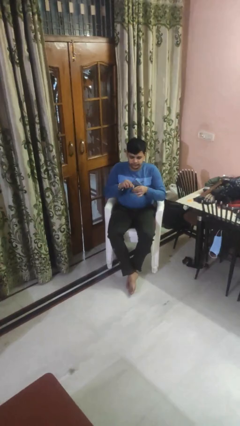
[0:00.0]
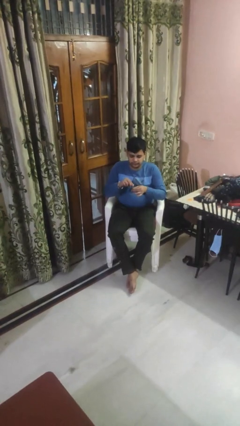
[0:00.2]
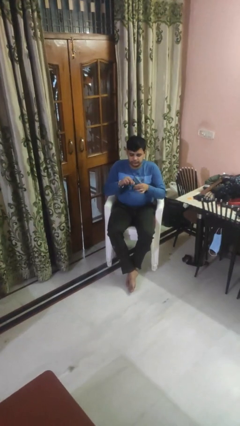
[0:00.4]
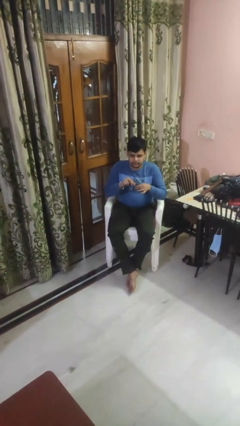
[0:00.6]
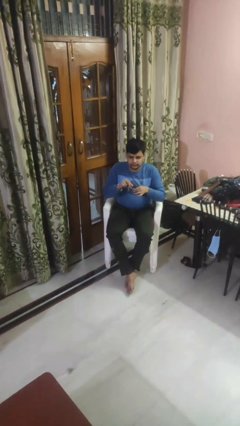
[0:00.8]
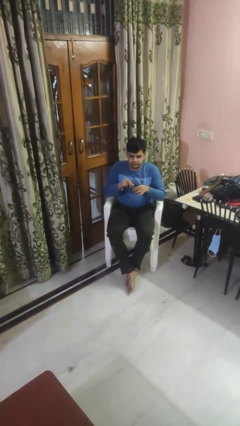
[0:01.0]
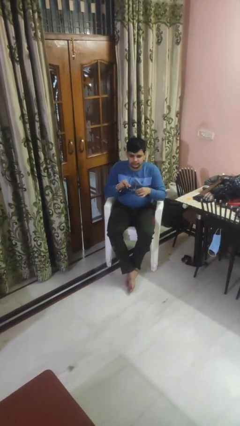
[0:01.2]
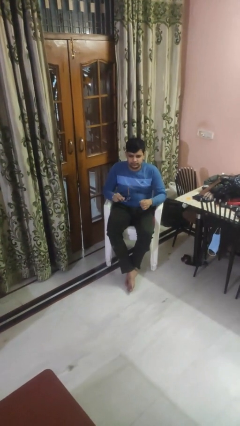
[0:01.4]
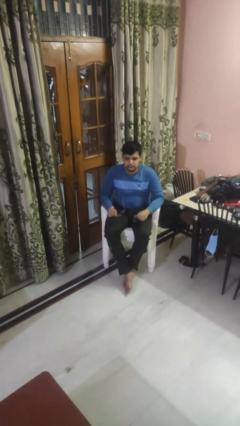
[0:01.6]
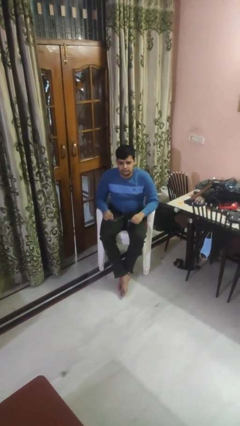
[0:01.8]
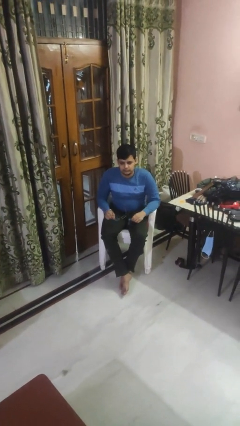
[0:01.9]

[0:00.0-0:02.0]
person cleans eyeglasses

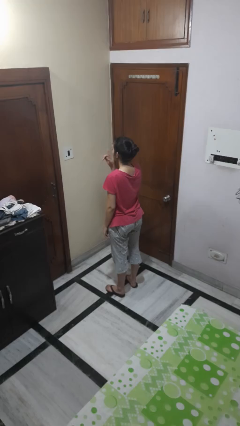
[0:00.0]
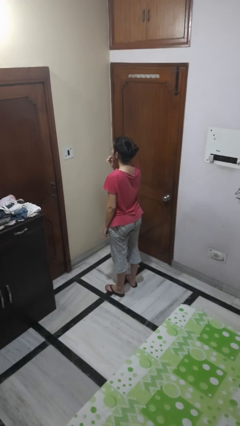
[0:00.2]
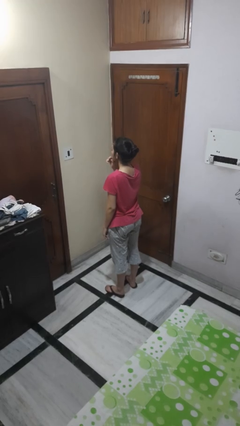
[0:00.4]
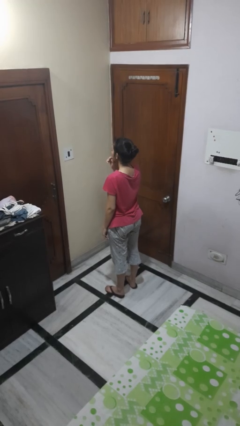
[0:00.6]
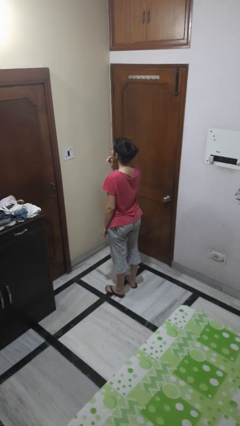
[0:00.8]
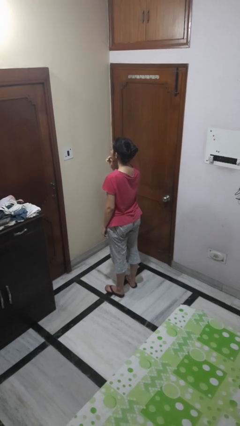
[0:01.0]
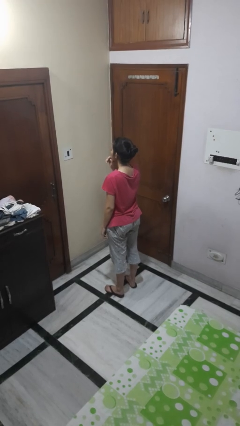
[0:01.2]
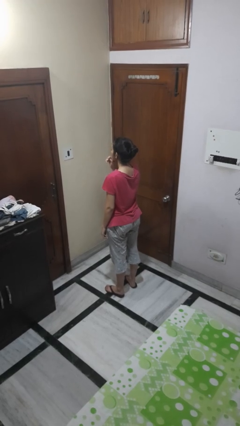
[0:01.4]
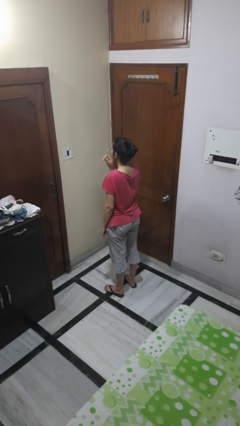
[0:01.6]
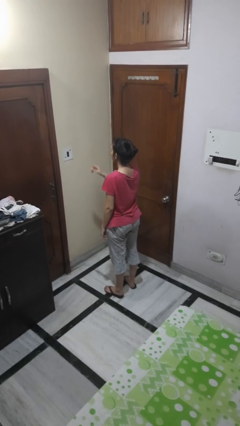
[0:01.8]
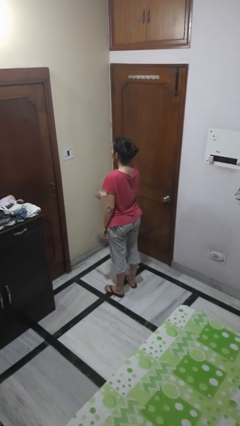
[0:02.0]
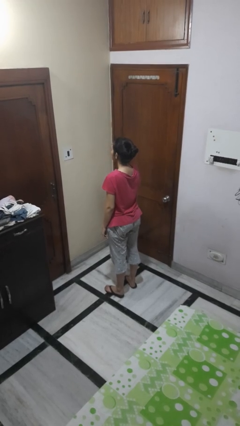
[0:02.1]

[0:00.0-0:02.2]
person gestures be quiet

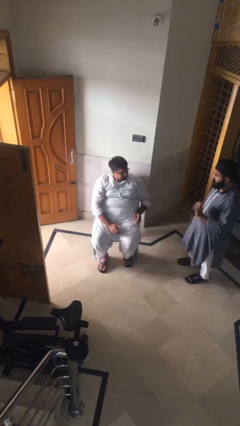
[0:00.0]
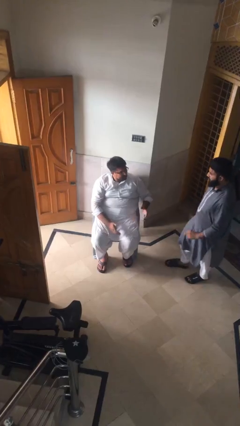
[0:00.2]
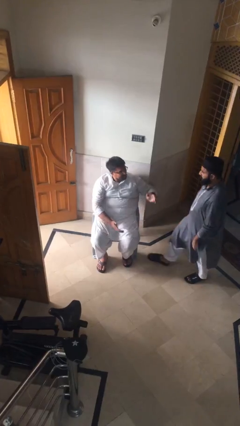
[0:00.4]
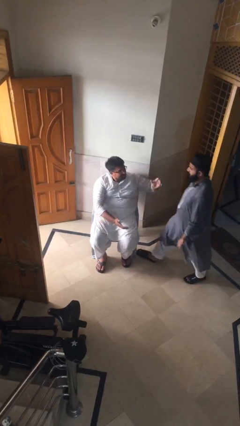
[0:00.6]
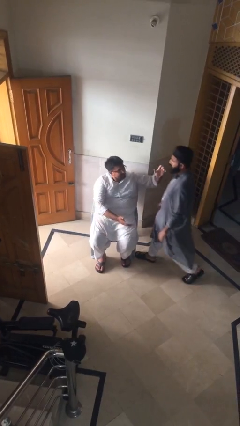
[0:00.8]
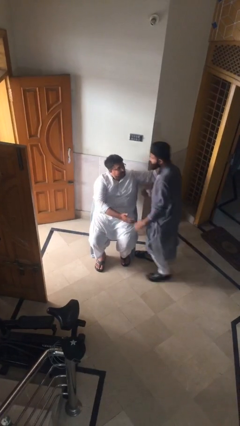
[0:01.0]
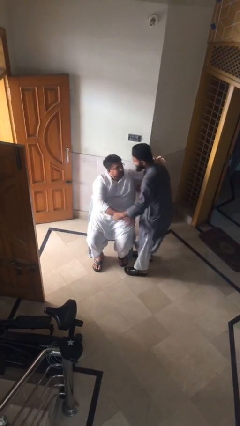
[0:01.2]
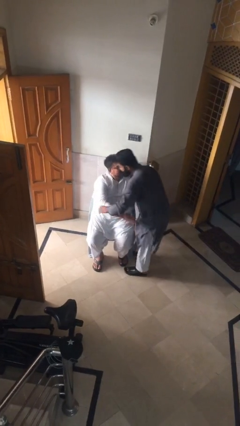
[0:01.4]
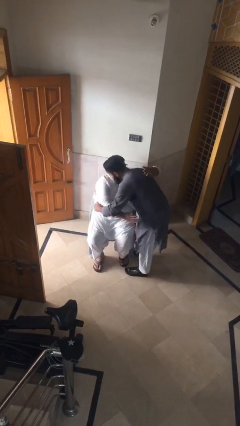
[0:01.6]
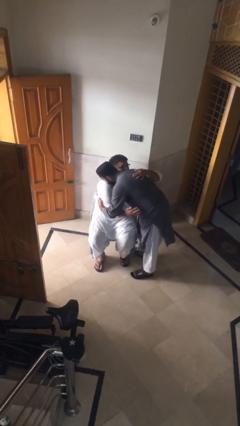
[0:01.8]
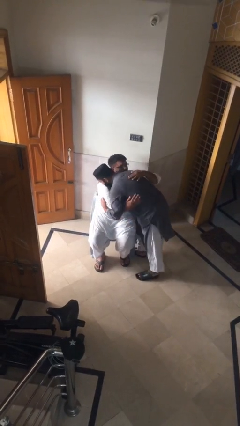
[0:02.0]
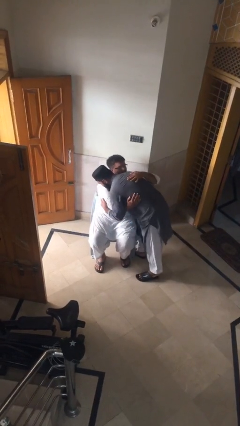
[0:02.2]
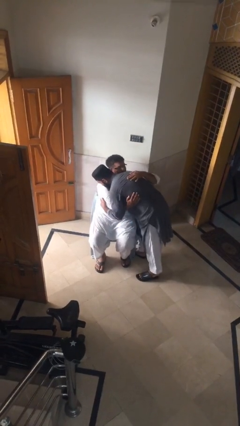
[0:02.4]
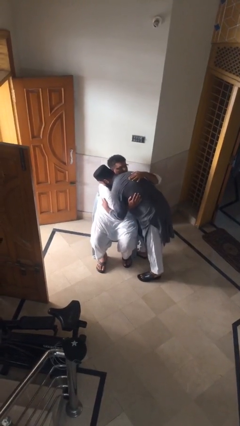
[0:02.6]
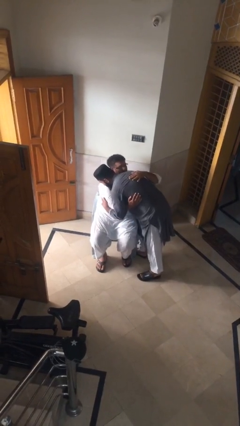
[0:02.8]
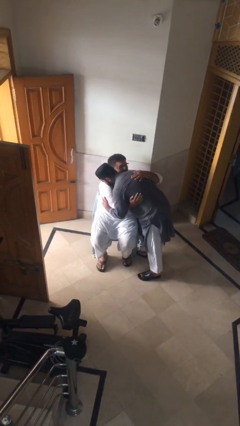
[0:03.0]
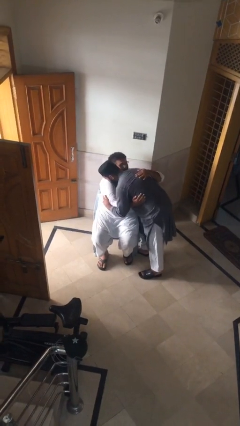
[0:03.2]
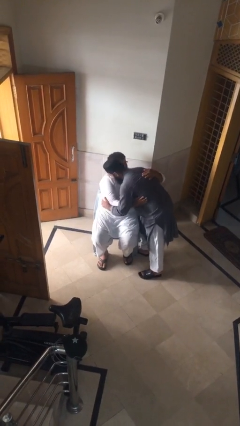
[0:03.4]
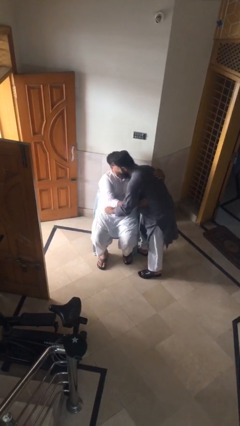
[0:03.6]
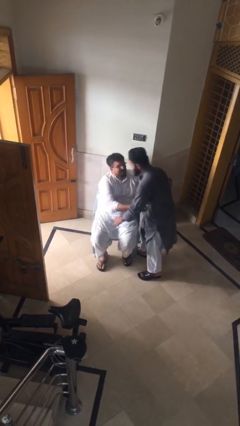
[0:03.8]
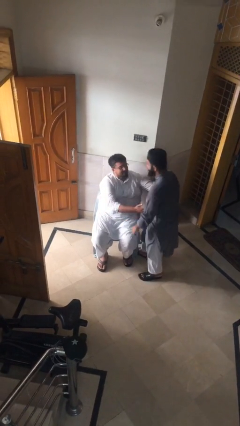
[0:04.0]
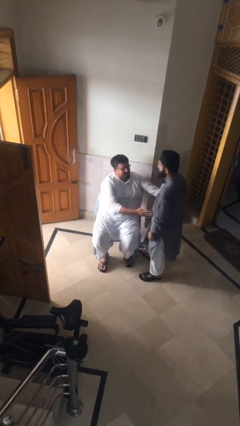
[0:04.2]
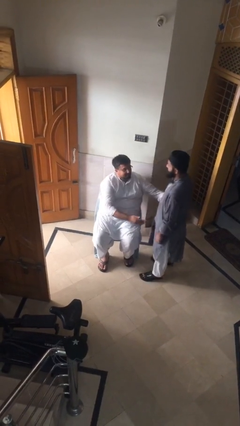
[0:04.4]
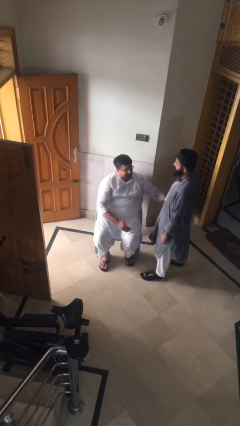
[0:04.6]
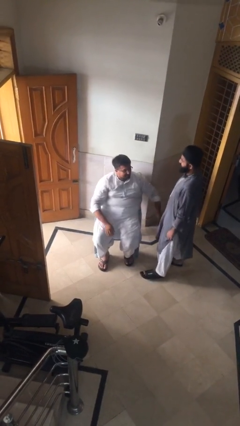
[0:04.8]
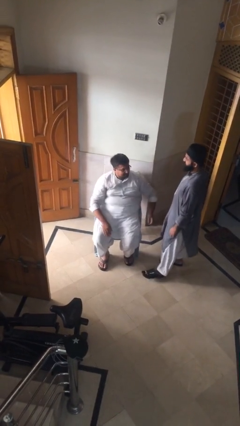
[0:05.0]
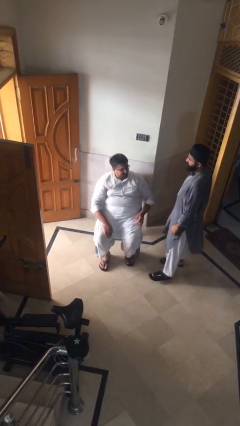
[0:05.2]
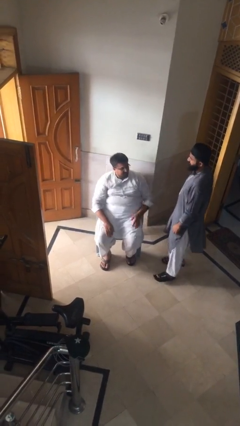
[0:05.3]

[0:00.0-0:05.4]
person embraces person

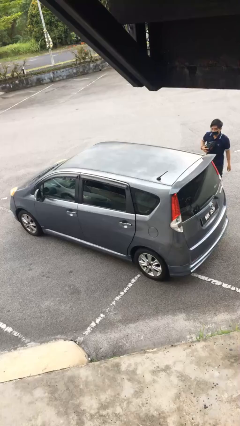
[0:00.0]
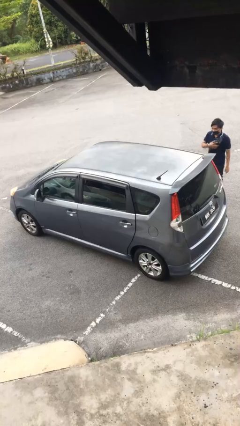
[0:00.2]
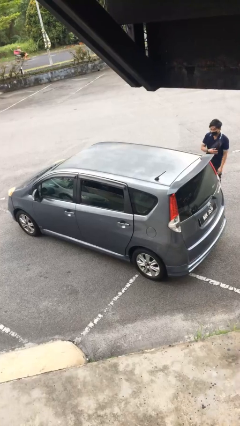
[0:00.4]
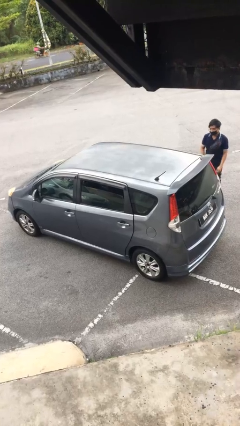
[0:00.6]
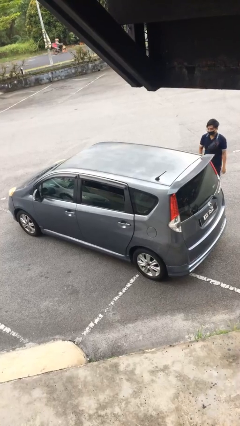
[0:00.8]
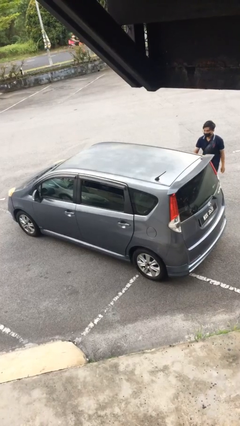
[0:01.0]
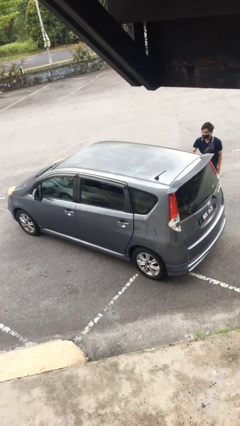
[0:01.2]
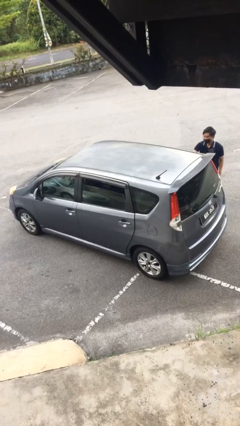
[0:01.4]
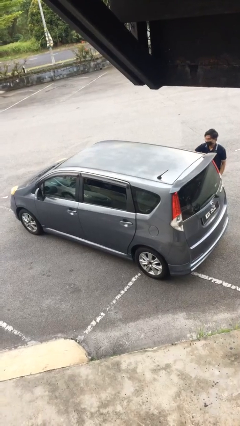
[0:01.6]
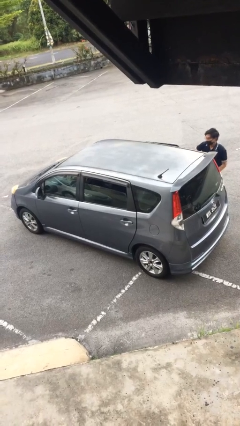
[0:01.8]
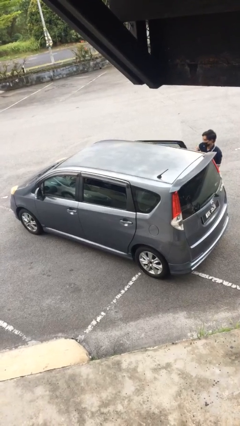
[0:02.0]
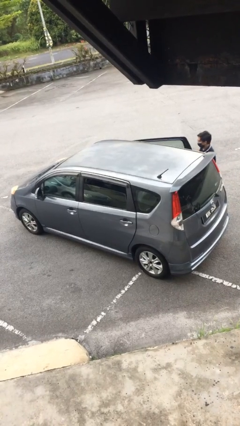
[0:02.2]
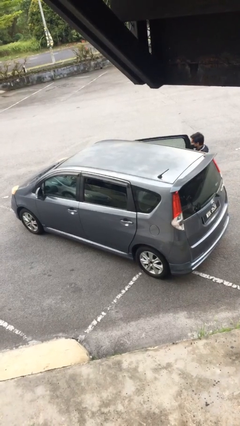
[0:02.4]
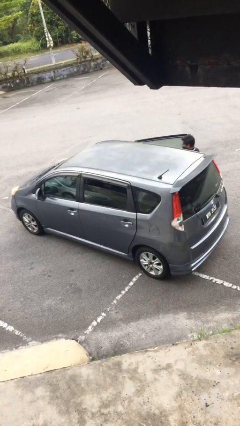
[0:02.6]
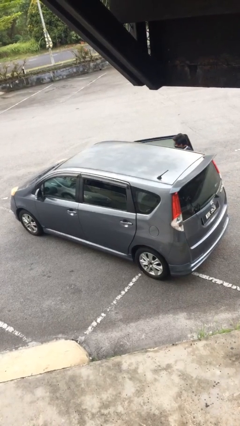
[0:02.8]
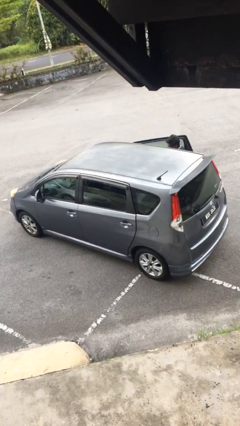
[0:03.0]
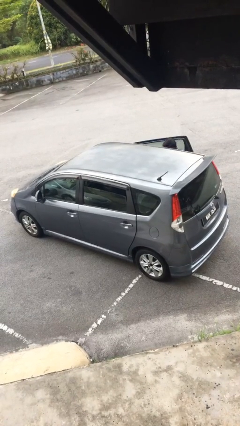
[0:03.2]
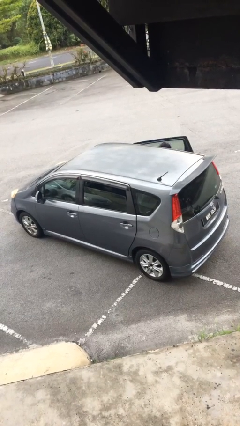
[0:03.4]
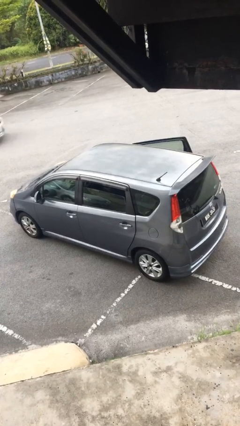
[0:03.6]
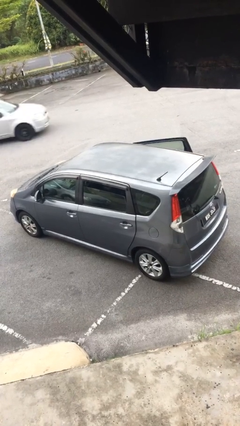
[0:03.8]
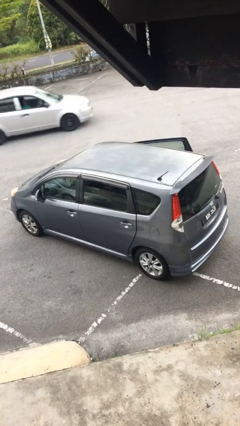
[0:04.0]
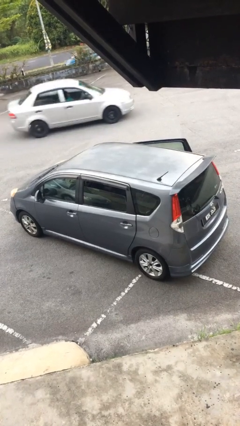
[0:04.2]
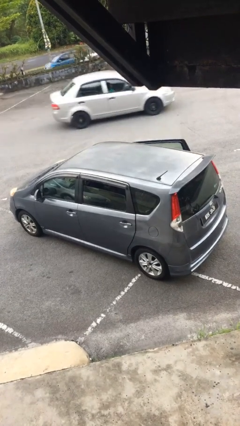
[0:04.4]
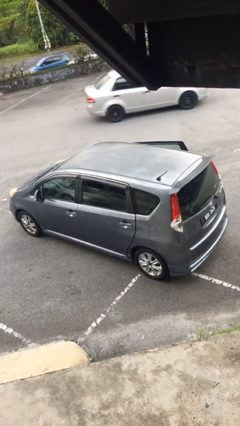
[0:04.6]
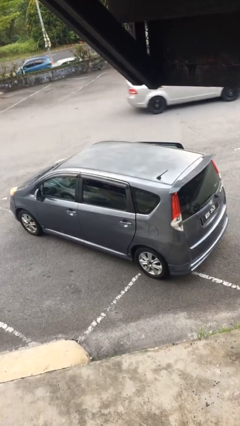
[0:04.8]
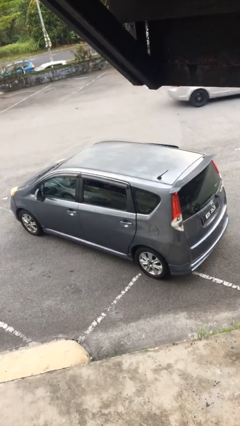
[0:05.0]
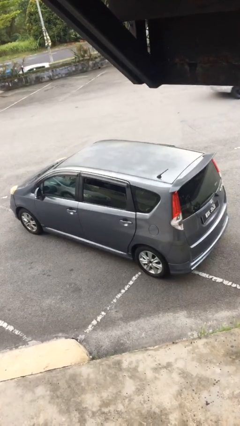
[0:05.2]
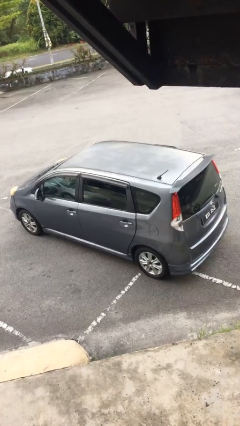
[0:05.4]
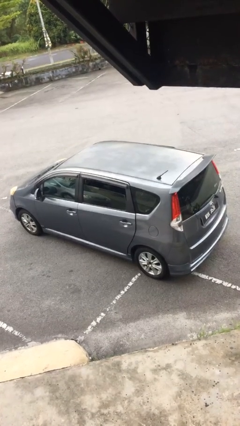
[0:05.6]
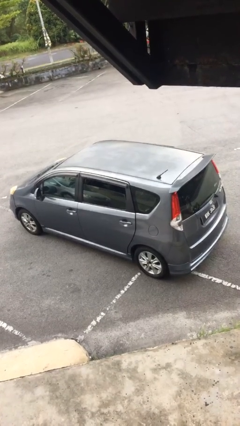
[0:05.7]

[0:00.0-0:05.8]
car picks up person

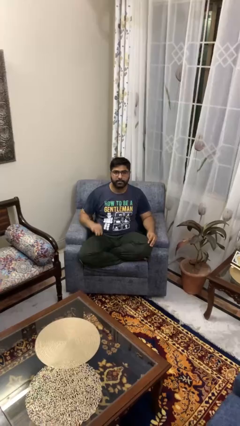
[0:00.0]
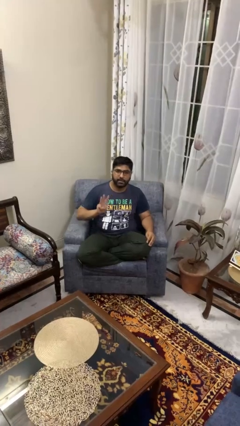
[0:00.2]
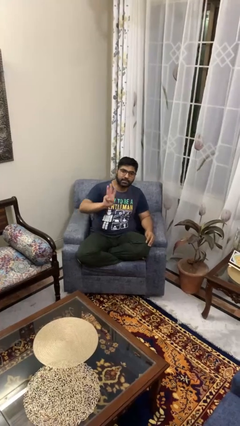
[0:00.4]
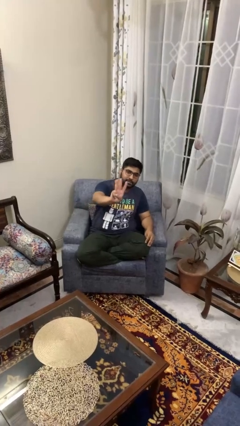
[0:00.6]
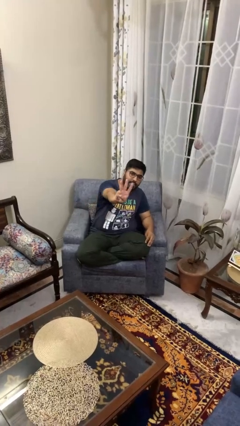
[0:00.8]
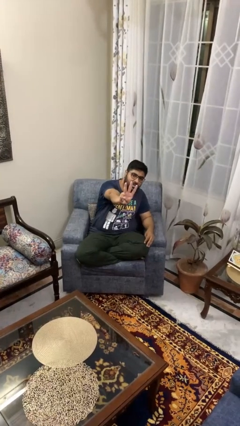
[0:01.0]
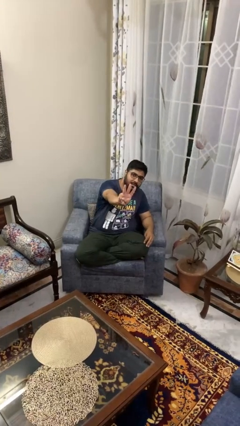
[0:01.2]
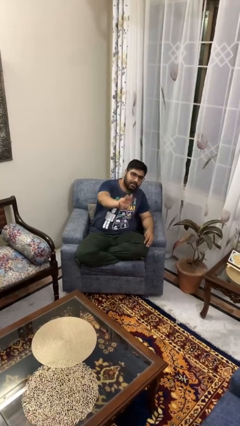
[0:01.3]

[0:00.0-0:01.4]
person gestures number three

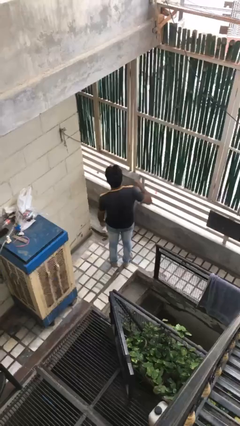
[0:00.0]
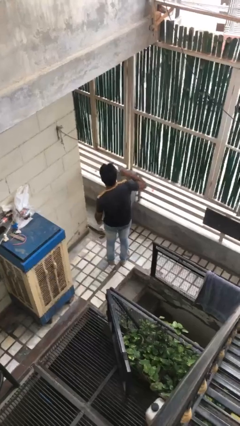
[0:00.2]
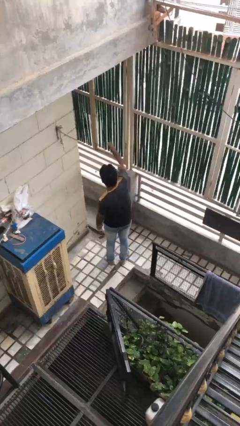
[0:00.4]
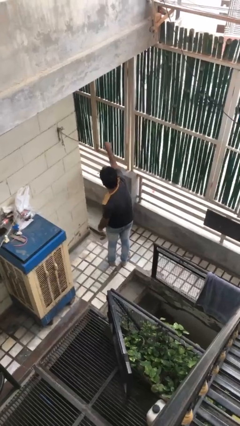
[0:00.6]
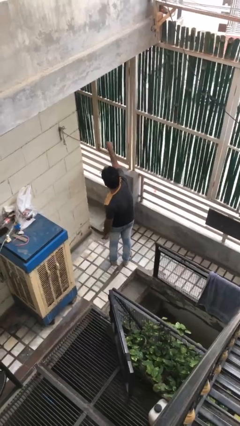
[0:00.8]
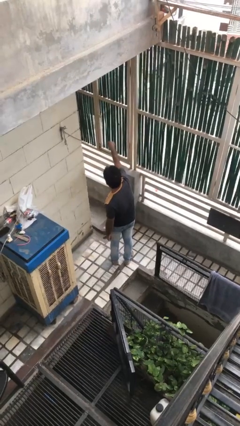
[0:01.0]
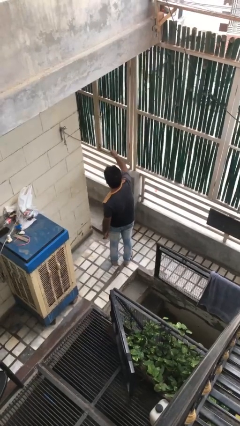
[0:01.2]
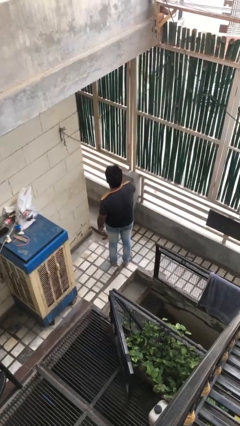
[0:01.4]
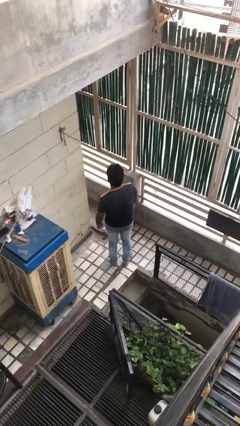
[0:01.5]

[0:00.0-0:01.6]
person punches
